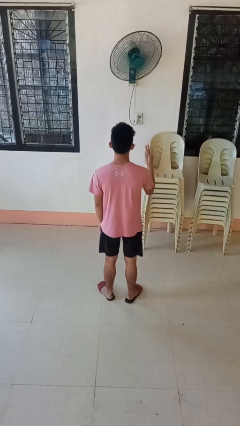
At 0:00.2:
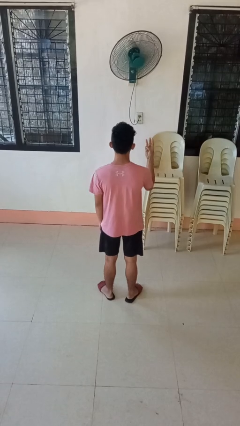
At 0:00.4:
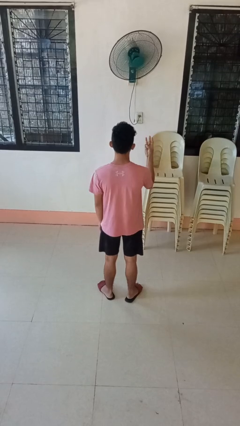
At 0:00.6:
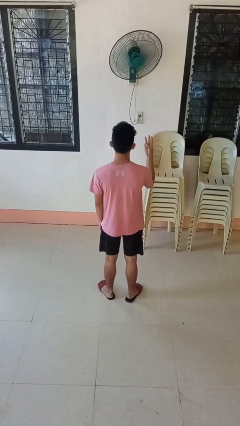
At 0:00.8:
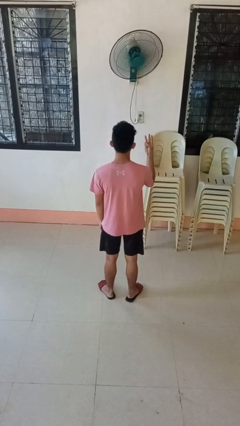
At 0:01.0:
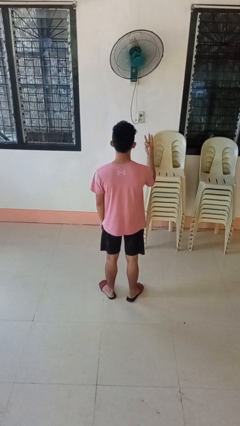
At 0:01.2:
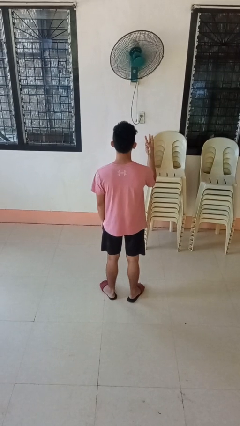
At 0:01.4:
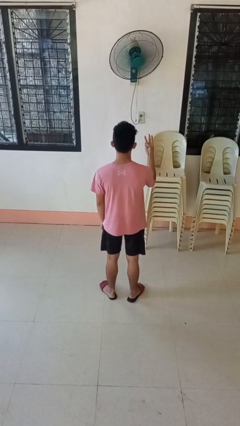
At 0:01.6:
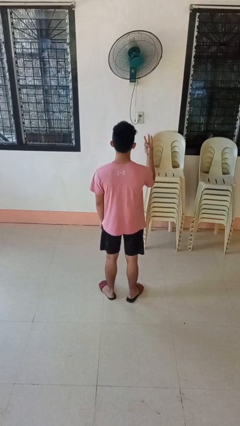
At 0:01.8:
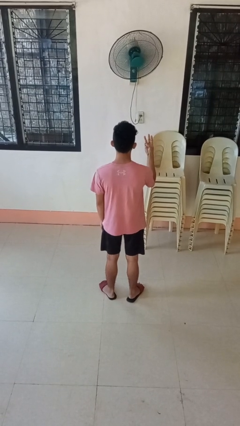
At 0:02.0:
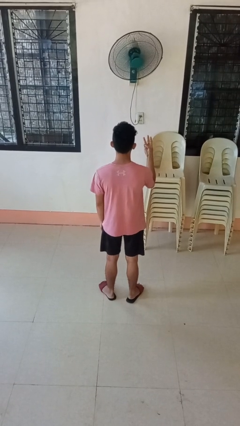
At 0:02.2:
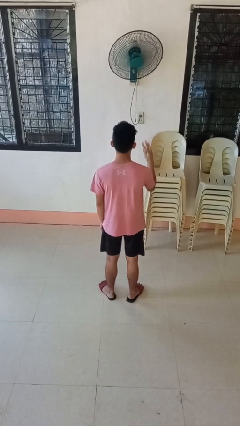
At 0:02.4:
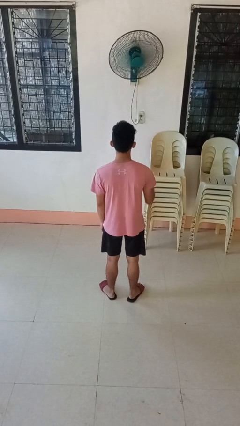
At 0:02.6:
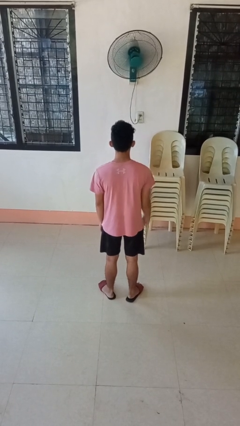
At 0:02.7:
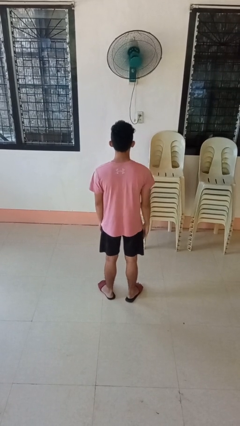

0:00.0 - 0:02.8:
person gestures number three

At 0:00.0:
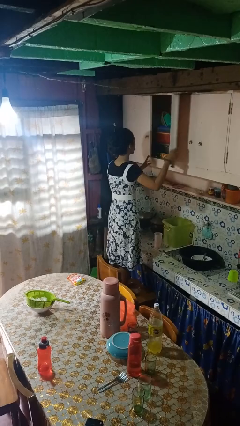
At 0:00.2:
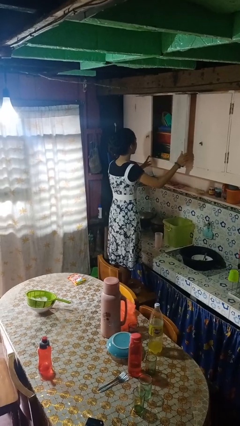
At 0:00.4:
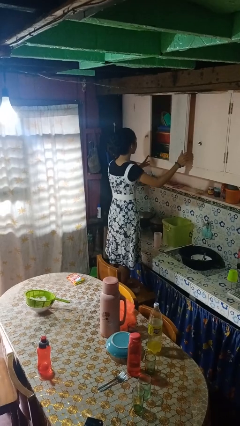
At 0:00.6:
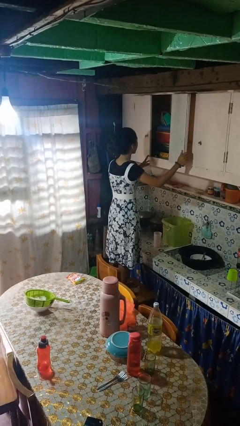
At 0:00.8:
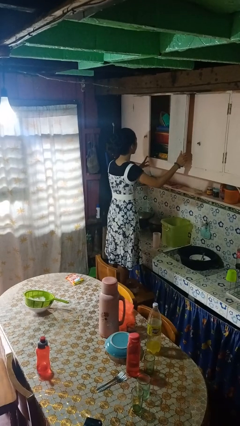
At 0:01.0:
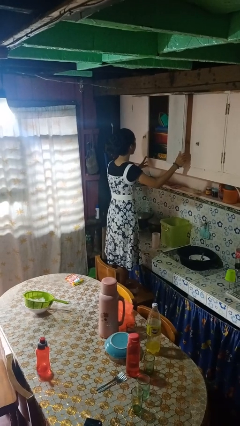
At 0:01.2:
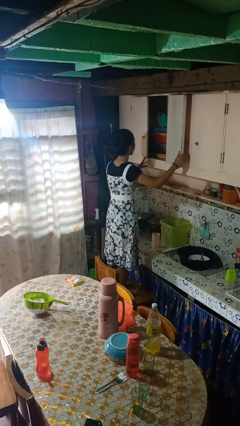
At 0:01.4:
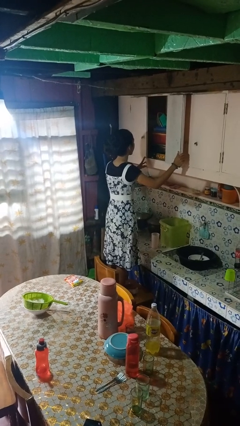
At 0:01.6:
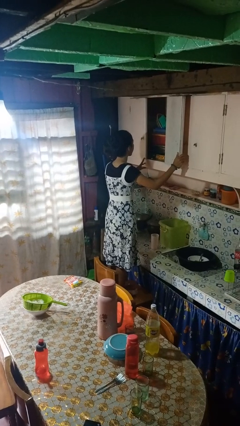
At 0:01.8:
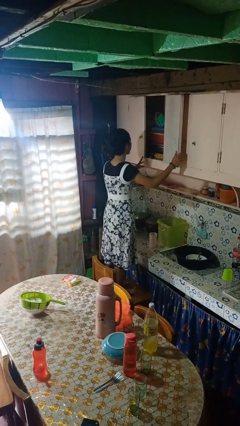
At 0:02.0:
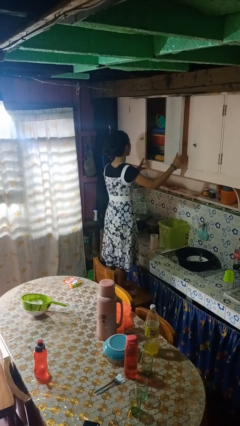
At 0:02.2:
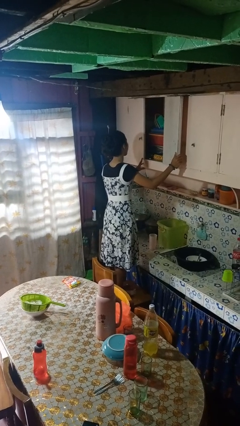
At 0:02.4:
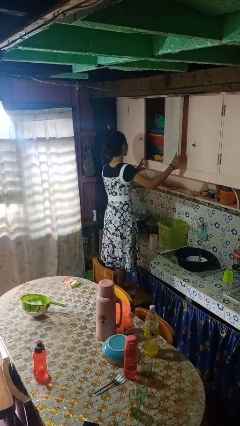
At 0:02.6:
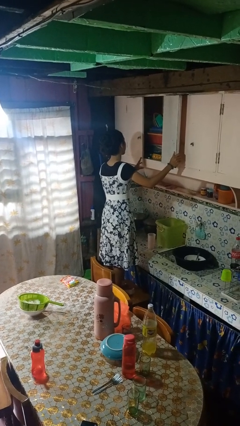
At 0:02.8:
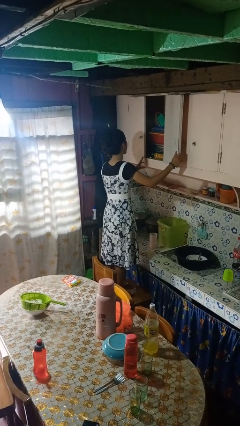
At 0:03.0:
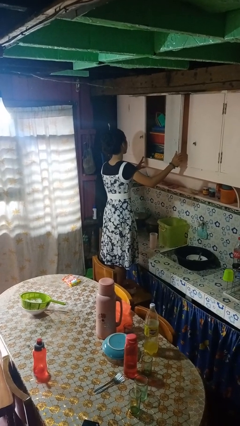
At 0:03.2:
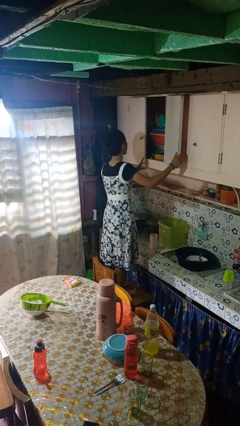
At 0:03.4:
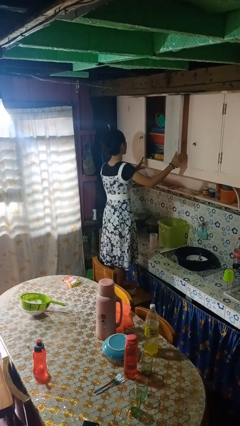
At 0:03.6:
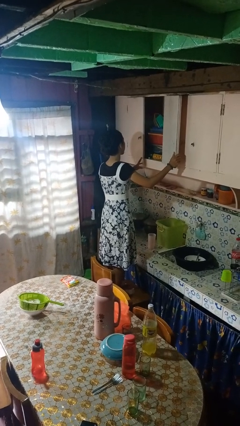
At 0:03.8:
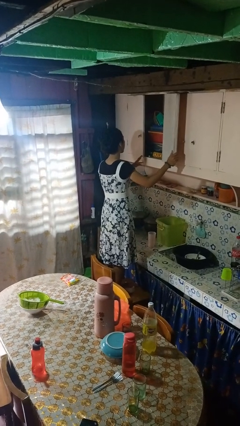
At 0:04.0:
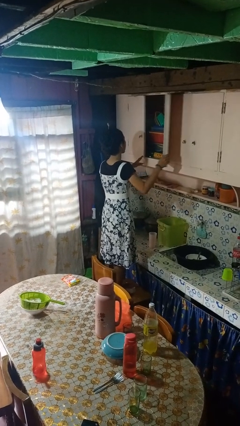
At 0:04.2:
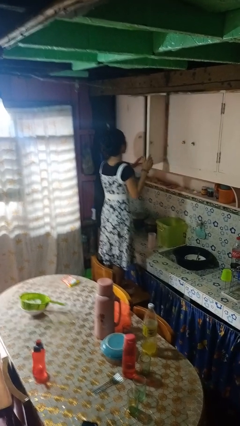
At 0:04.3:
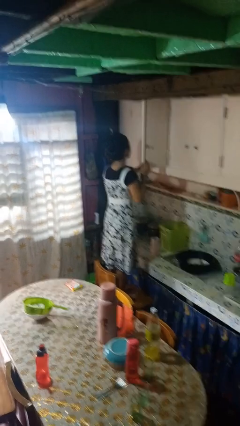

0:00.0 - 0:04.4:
person opens cabinet

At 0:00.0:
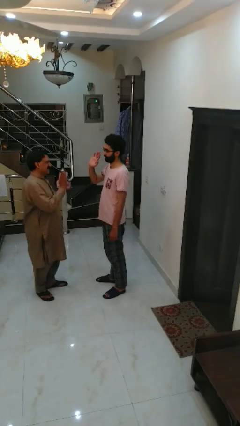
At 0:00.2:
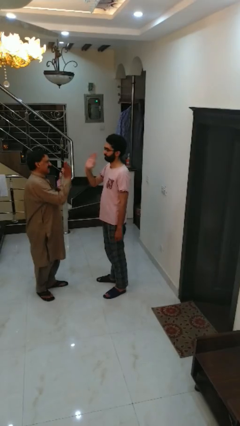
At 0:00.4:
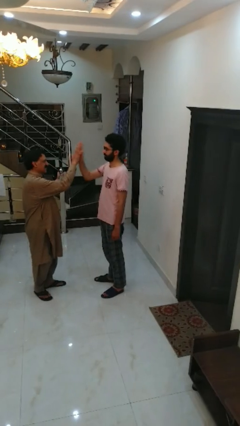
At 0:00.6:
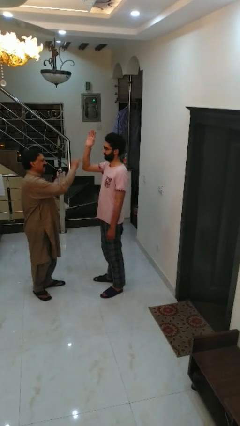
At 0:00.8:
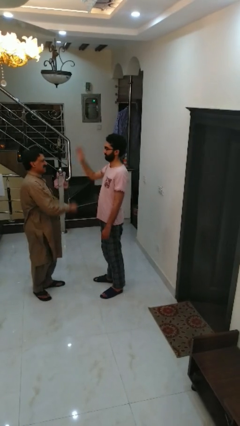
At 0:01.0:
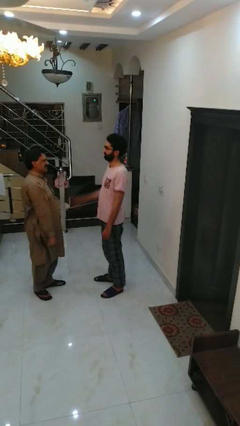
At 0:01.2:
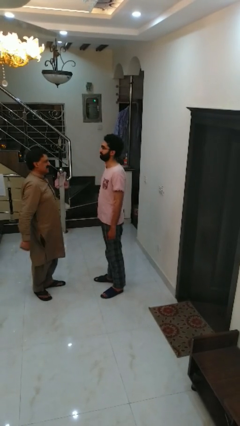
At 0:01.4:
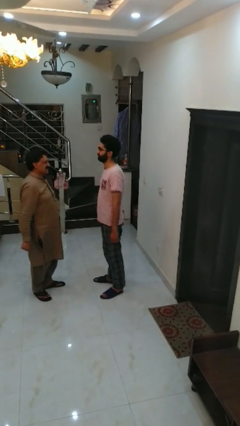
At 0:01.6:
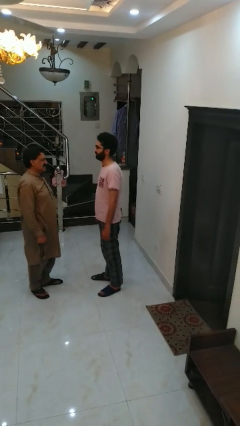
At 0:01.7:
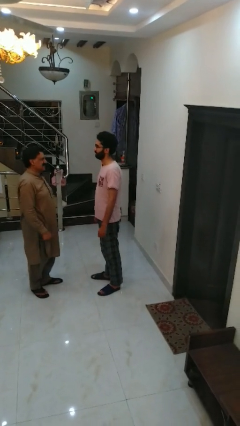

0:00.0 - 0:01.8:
person highfives hand

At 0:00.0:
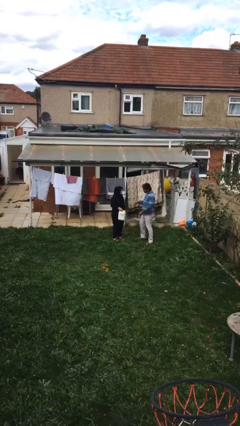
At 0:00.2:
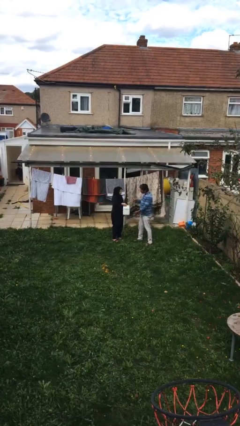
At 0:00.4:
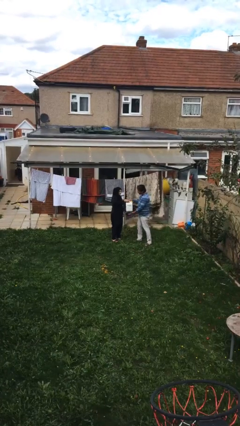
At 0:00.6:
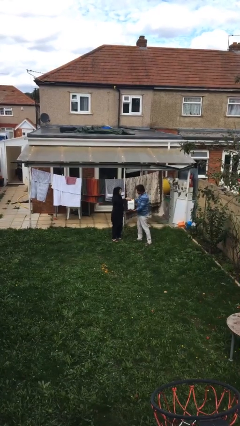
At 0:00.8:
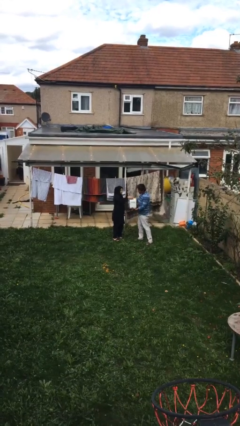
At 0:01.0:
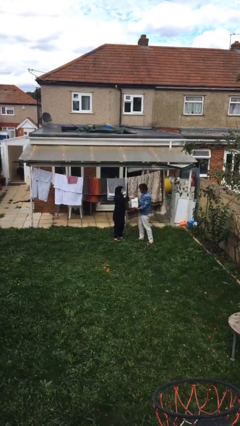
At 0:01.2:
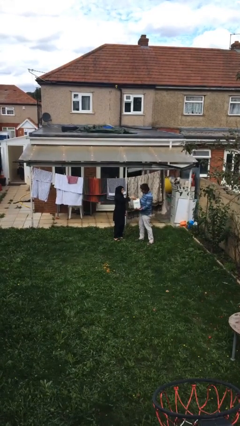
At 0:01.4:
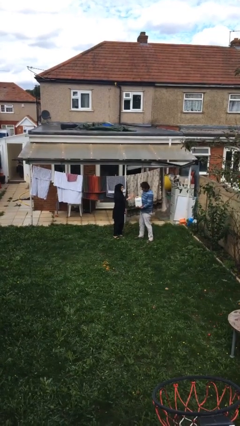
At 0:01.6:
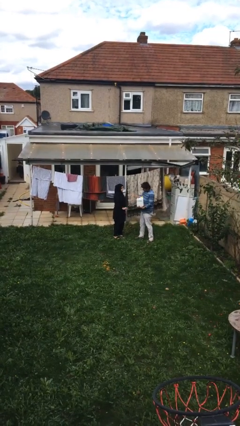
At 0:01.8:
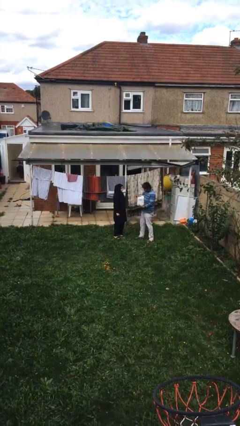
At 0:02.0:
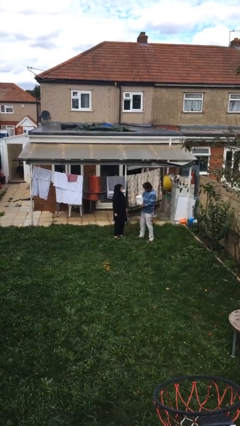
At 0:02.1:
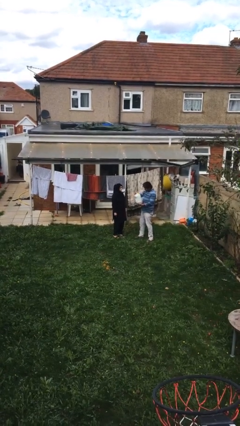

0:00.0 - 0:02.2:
person transfers object to person

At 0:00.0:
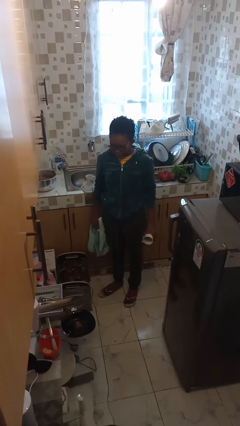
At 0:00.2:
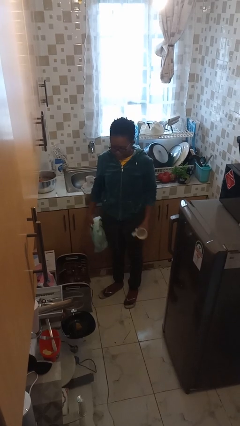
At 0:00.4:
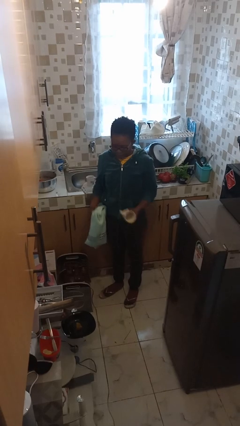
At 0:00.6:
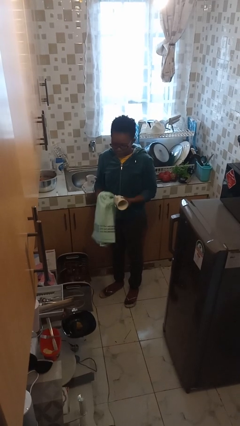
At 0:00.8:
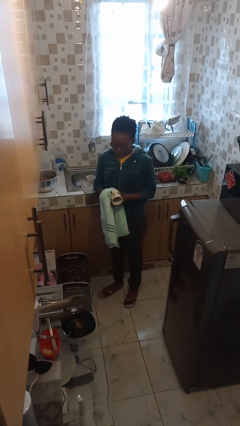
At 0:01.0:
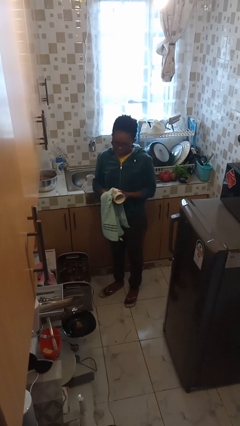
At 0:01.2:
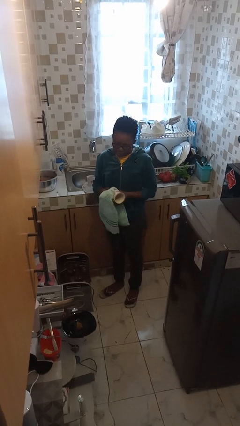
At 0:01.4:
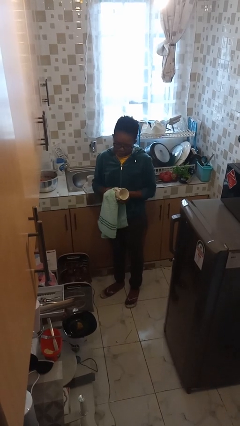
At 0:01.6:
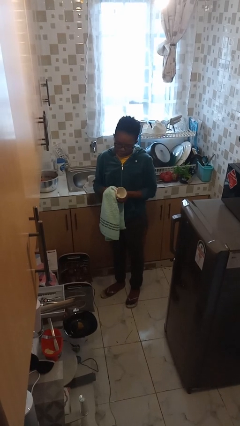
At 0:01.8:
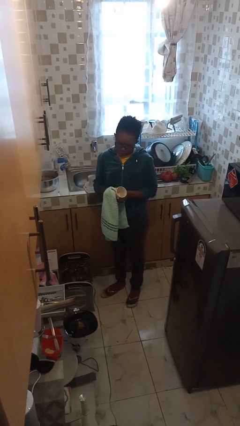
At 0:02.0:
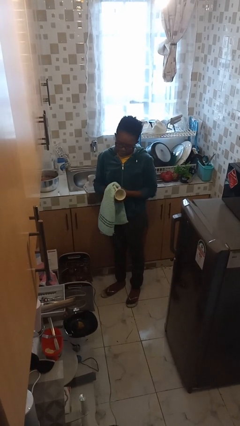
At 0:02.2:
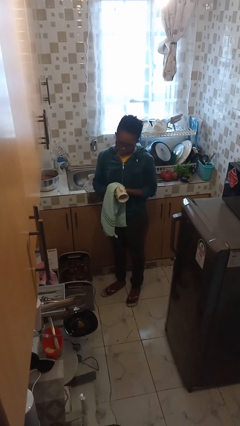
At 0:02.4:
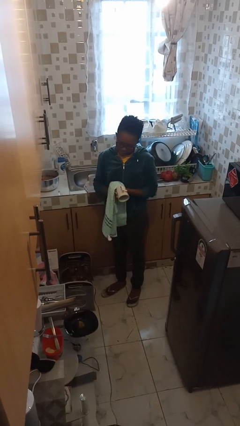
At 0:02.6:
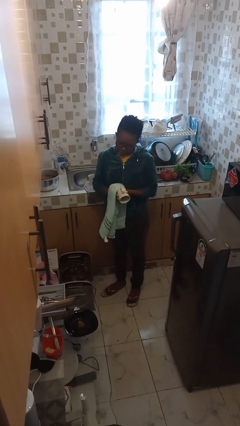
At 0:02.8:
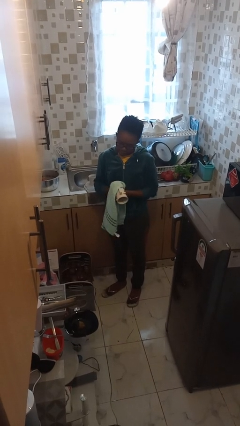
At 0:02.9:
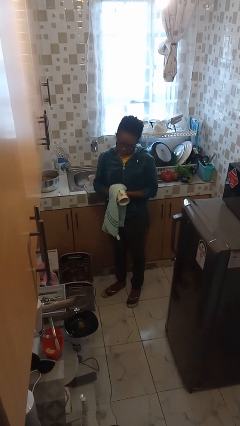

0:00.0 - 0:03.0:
person dries dish

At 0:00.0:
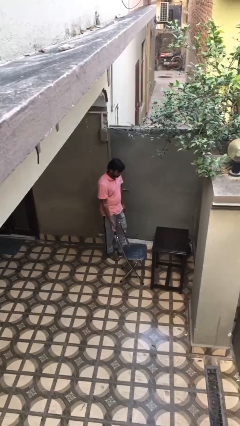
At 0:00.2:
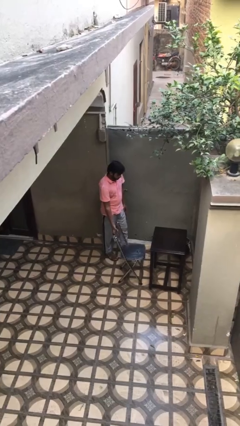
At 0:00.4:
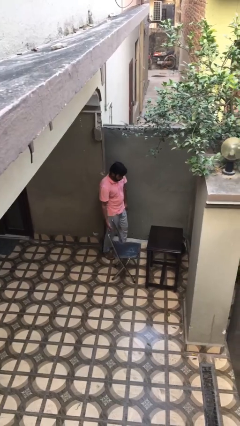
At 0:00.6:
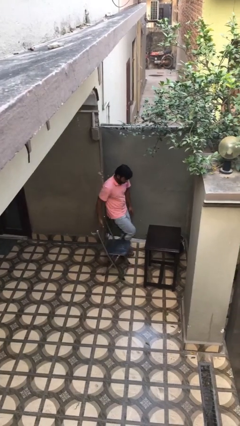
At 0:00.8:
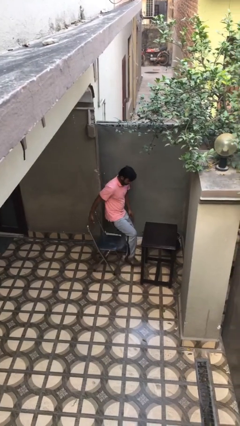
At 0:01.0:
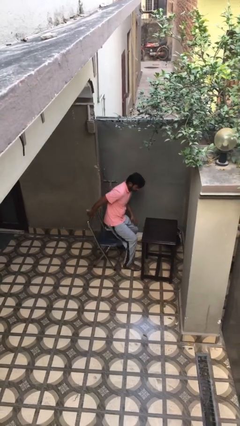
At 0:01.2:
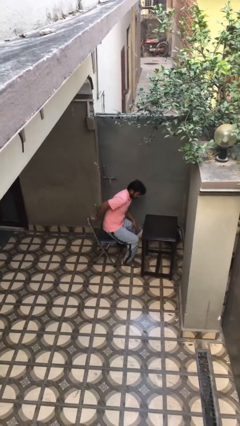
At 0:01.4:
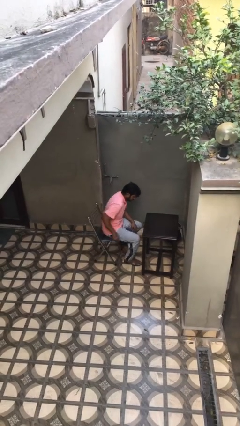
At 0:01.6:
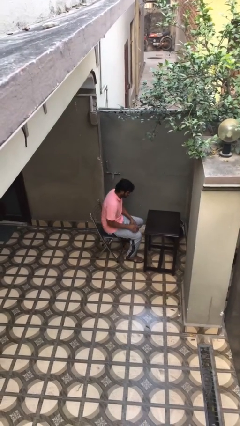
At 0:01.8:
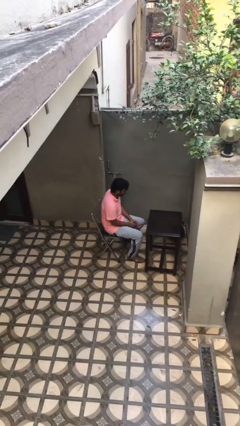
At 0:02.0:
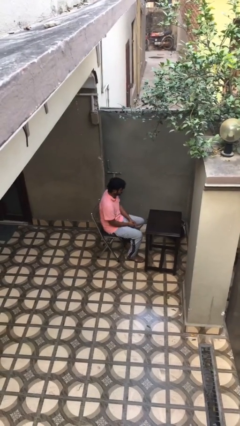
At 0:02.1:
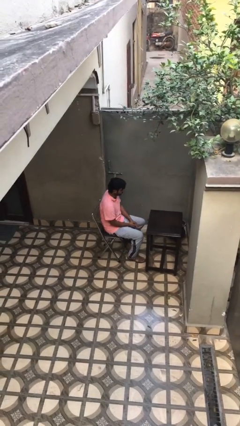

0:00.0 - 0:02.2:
person sits down

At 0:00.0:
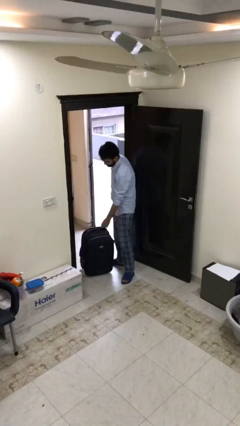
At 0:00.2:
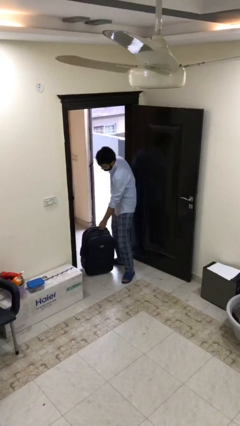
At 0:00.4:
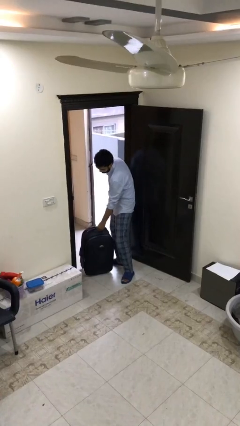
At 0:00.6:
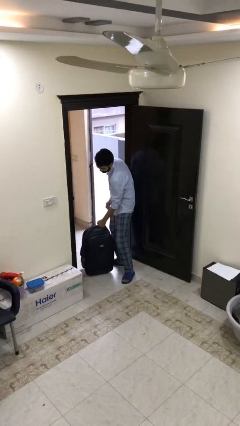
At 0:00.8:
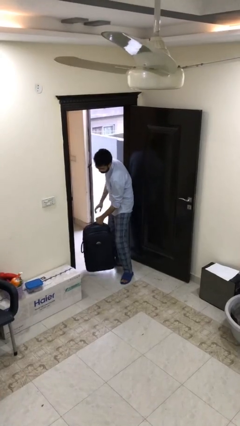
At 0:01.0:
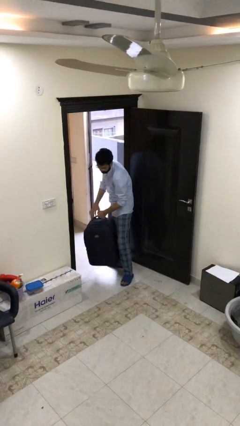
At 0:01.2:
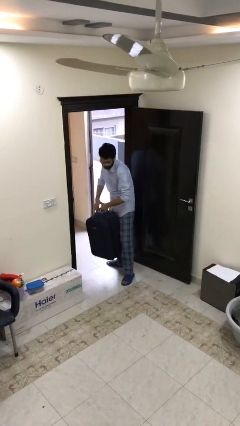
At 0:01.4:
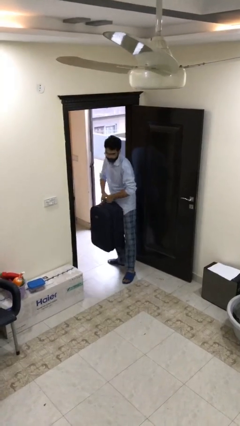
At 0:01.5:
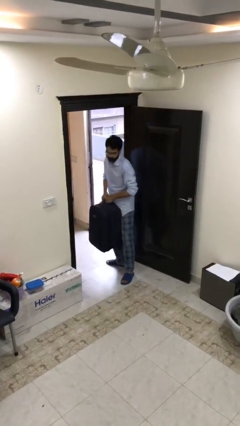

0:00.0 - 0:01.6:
person picks up object from floor
